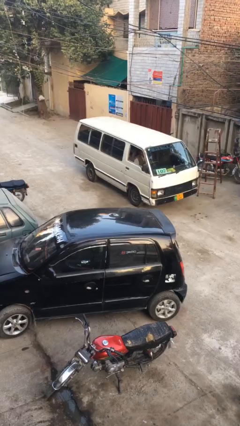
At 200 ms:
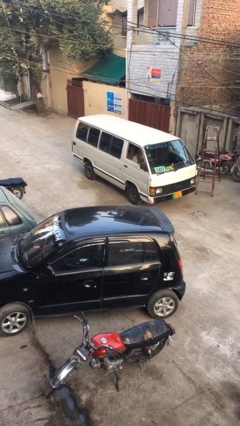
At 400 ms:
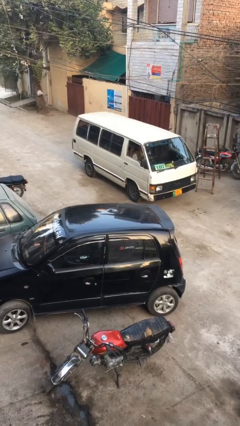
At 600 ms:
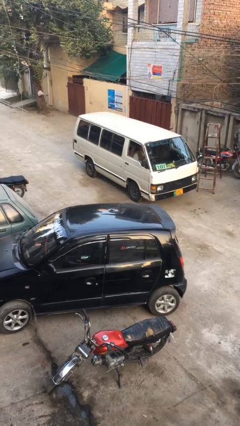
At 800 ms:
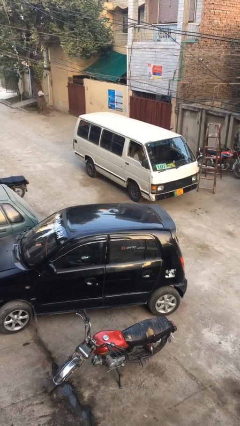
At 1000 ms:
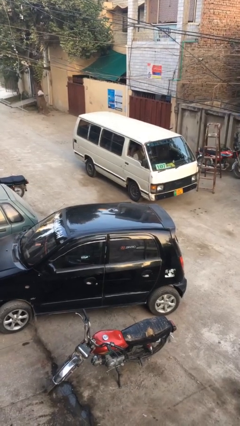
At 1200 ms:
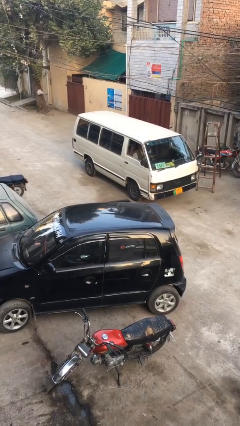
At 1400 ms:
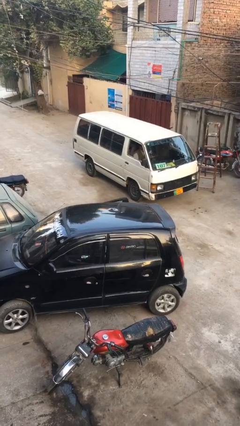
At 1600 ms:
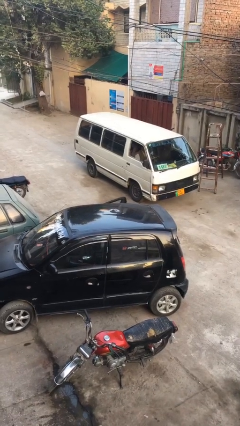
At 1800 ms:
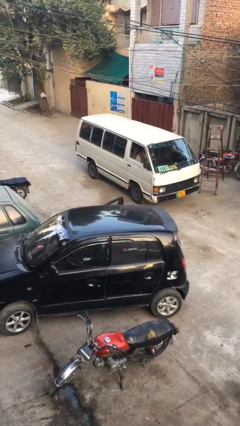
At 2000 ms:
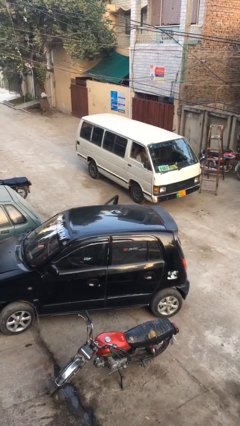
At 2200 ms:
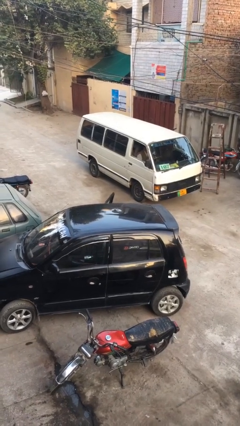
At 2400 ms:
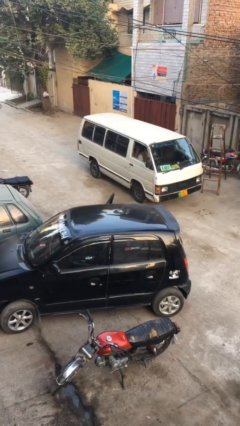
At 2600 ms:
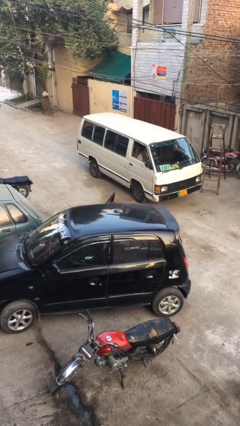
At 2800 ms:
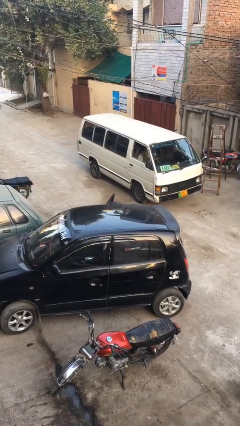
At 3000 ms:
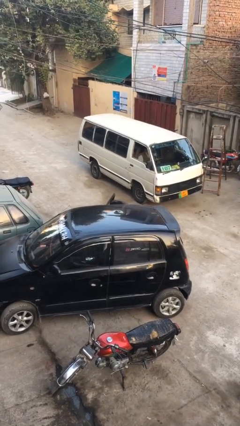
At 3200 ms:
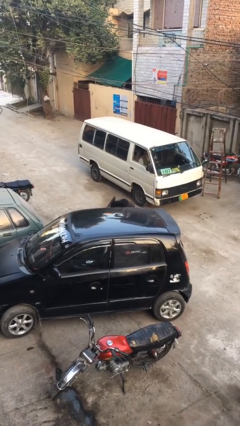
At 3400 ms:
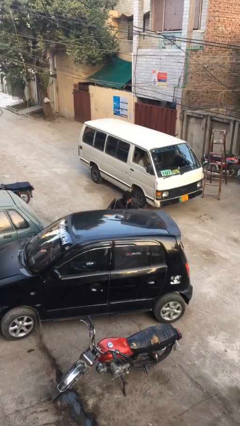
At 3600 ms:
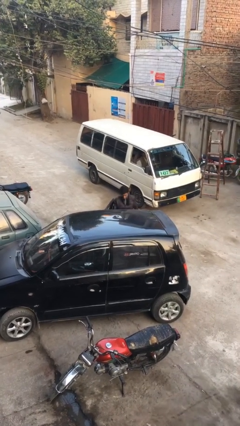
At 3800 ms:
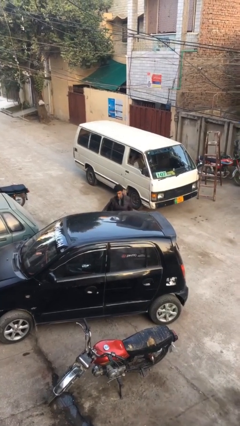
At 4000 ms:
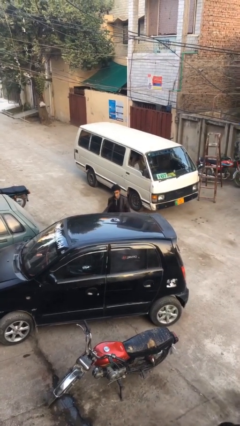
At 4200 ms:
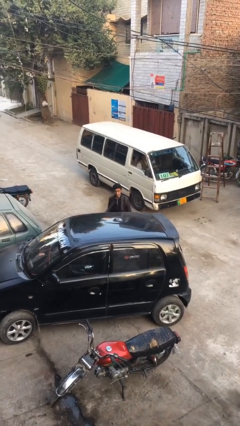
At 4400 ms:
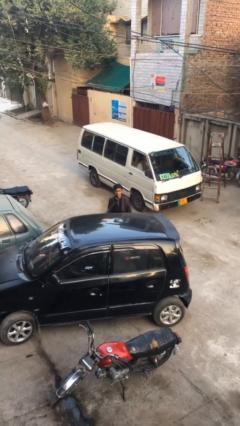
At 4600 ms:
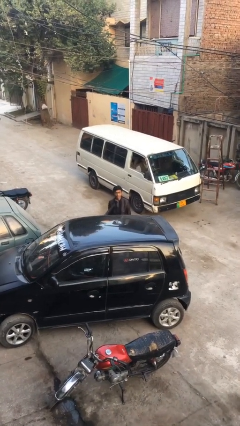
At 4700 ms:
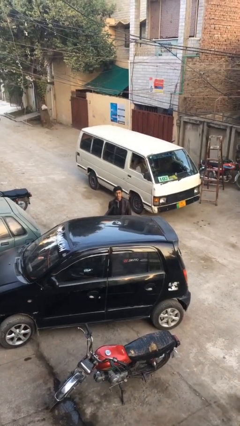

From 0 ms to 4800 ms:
person exits car

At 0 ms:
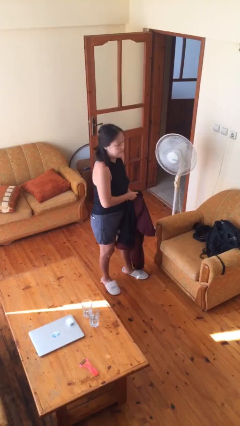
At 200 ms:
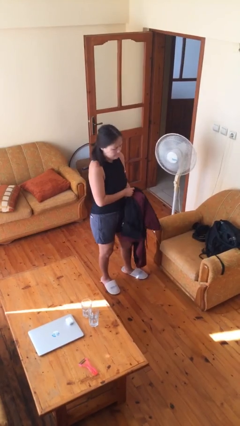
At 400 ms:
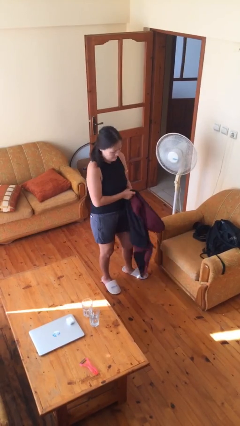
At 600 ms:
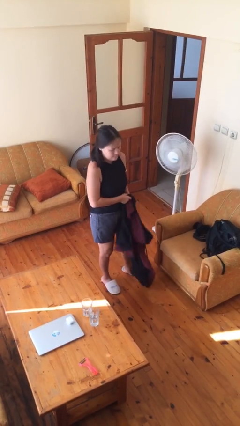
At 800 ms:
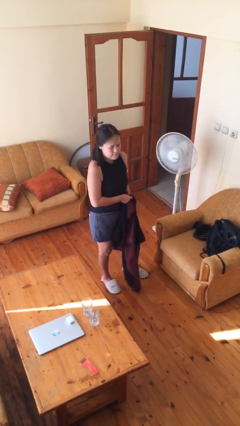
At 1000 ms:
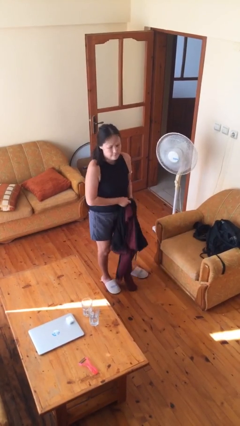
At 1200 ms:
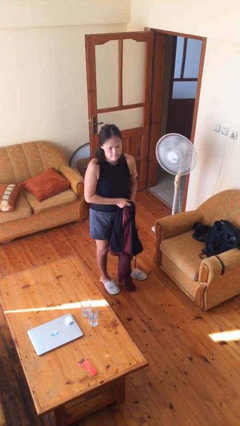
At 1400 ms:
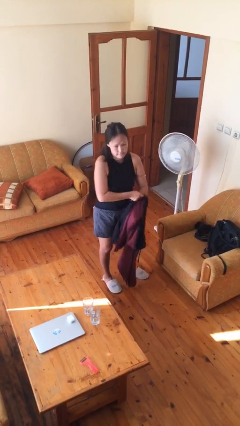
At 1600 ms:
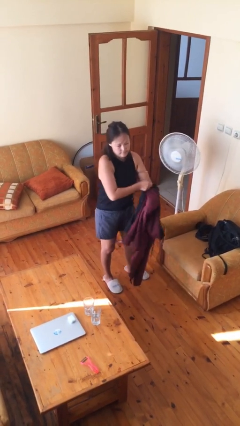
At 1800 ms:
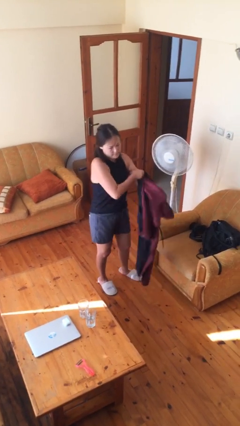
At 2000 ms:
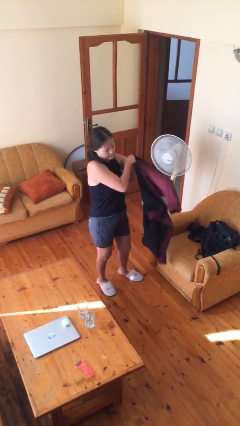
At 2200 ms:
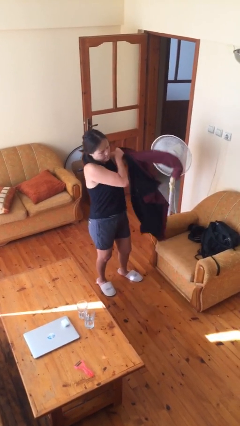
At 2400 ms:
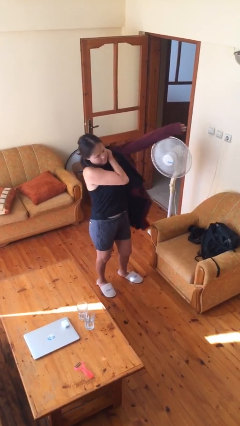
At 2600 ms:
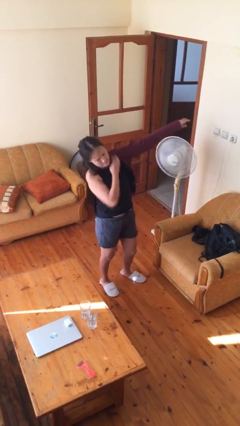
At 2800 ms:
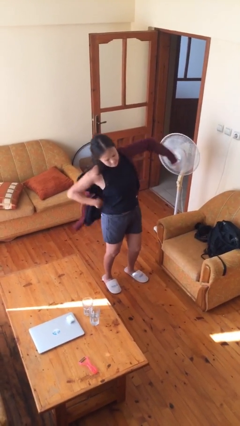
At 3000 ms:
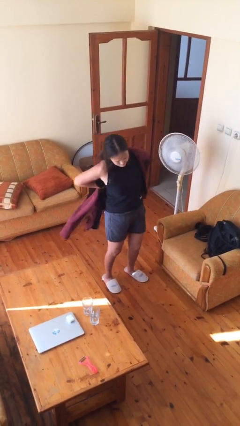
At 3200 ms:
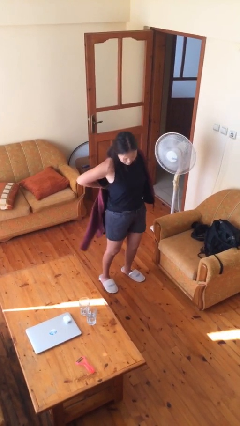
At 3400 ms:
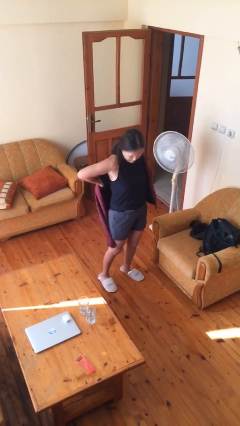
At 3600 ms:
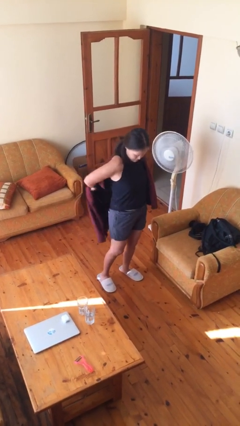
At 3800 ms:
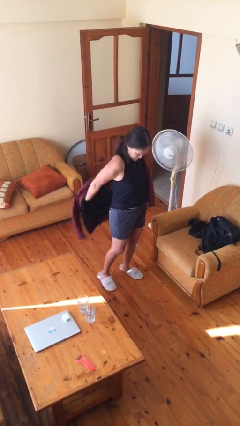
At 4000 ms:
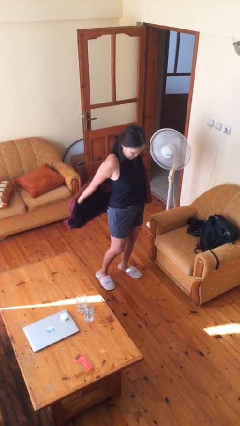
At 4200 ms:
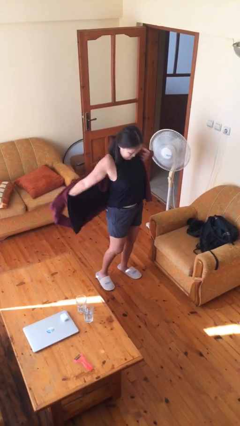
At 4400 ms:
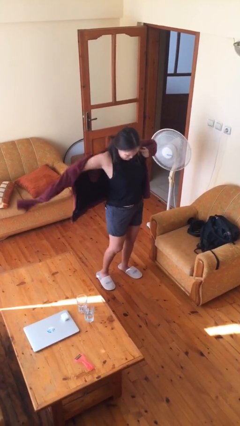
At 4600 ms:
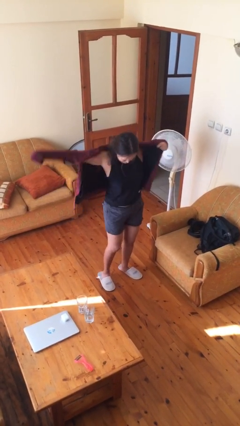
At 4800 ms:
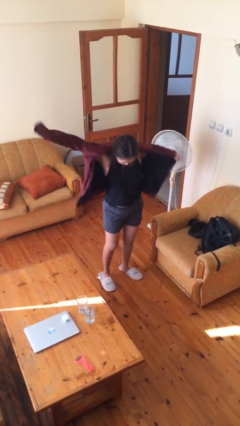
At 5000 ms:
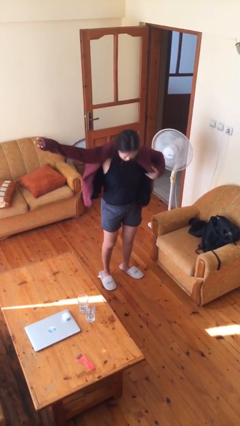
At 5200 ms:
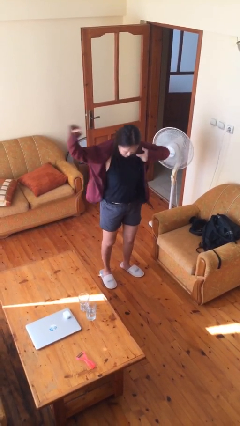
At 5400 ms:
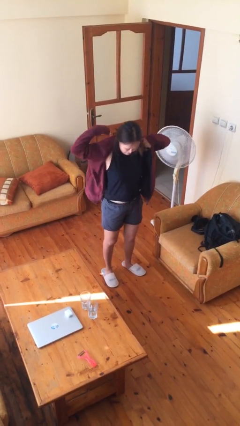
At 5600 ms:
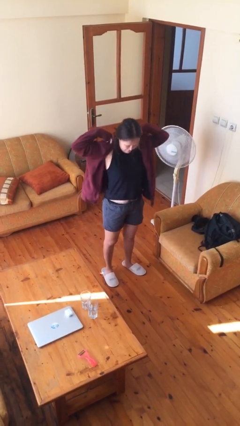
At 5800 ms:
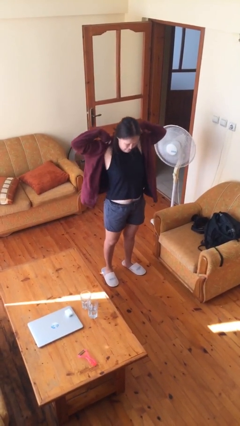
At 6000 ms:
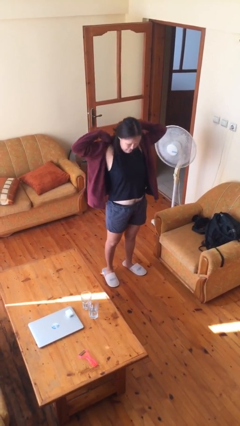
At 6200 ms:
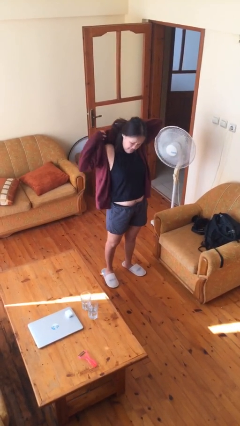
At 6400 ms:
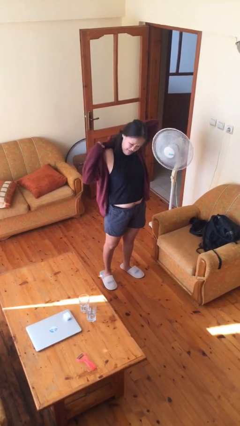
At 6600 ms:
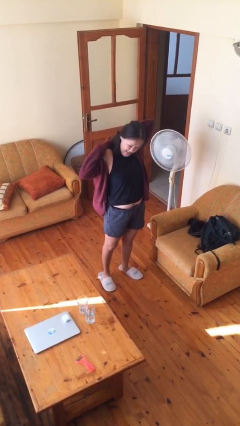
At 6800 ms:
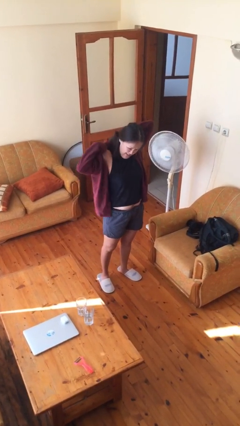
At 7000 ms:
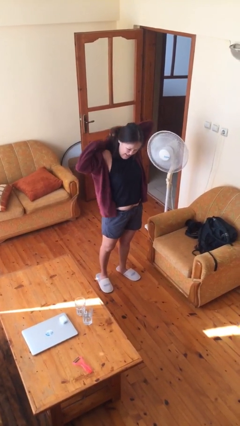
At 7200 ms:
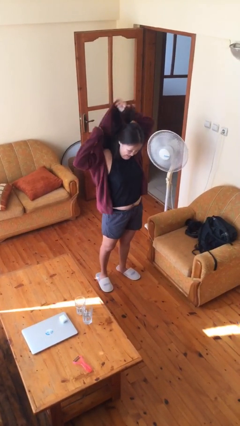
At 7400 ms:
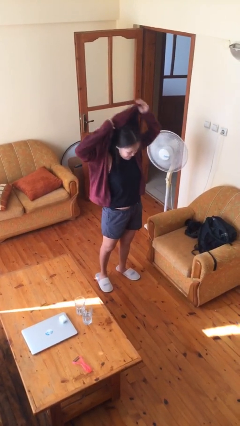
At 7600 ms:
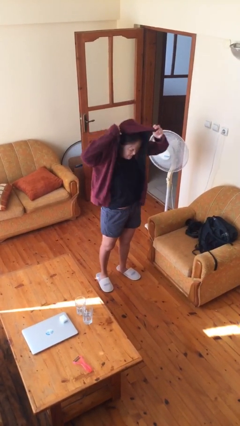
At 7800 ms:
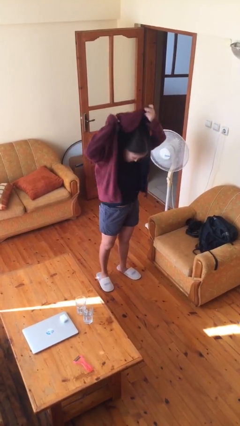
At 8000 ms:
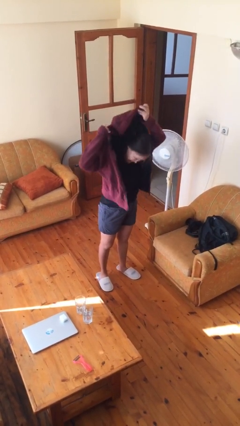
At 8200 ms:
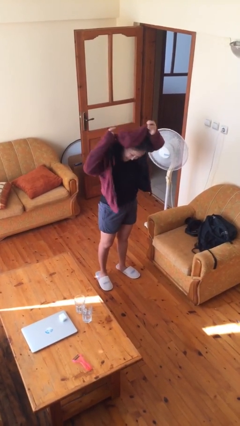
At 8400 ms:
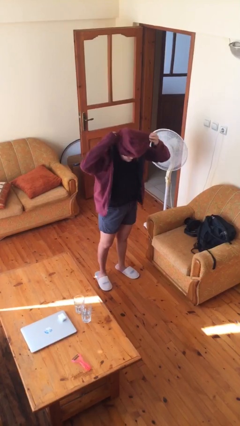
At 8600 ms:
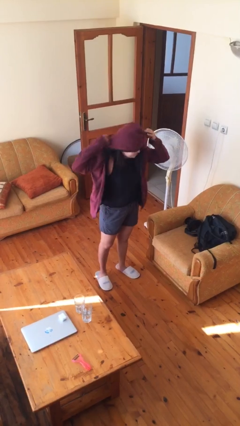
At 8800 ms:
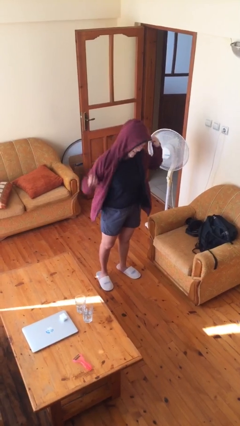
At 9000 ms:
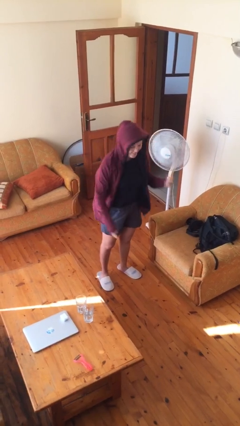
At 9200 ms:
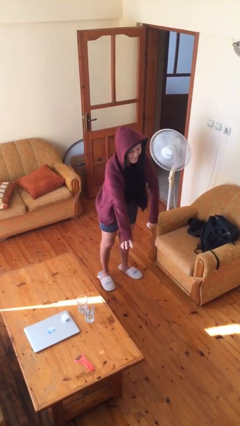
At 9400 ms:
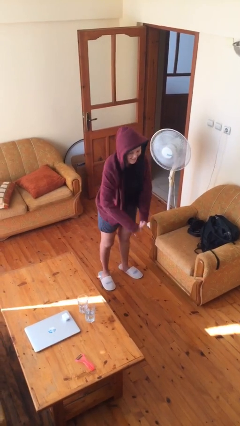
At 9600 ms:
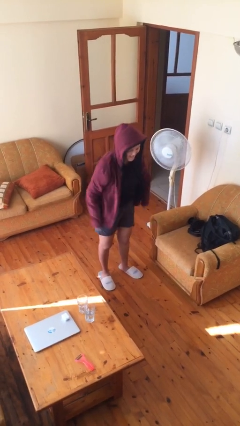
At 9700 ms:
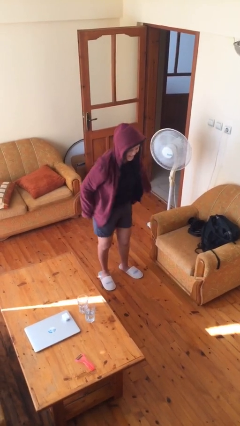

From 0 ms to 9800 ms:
person puts on hoodie

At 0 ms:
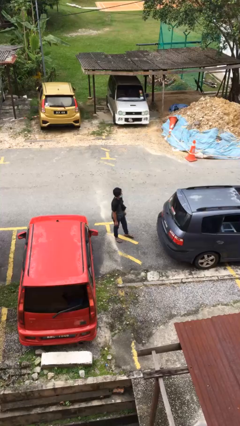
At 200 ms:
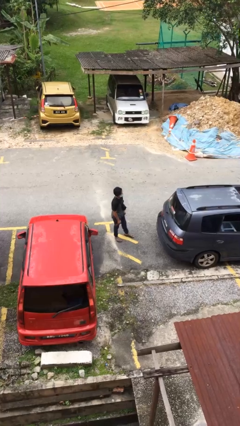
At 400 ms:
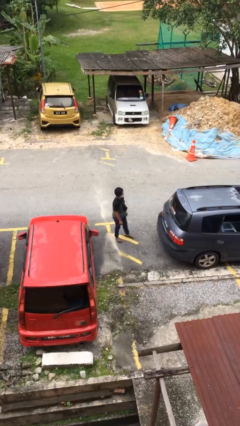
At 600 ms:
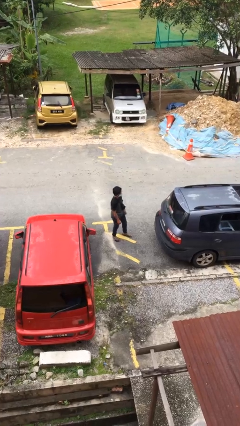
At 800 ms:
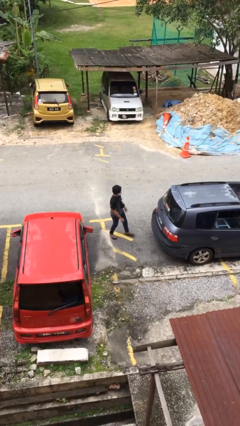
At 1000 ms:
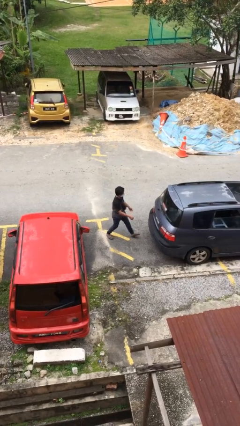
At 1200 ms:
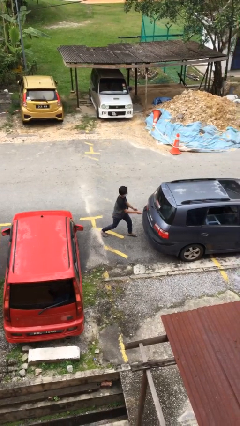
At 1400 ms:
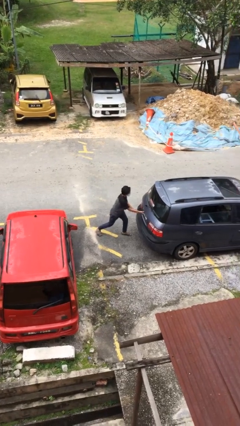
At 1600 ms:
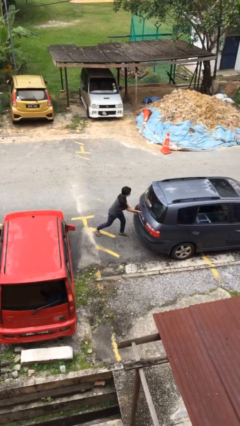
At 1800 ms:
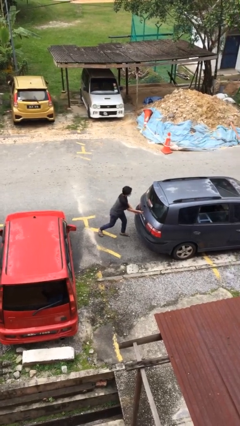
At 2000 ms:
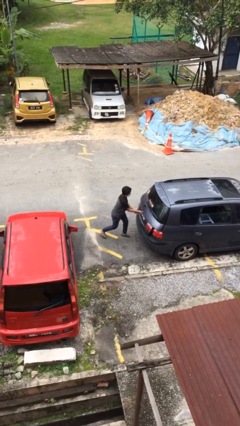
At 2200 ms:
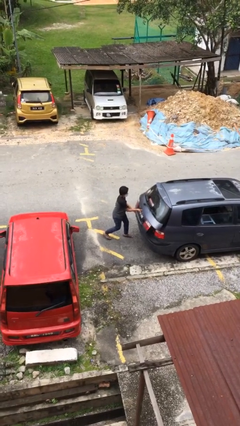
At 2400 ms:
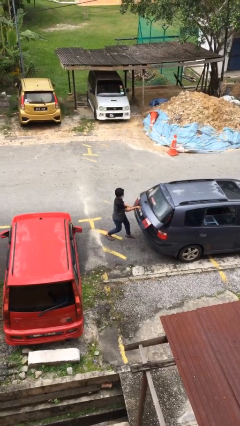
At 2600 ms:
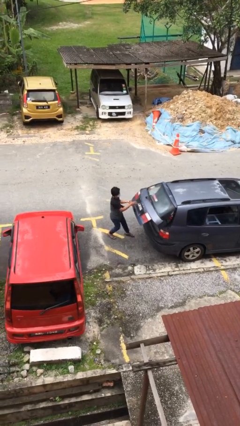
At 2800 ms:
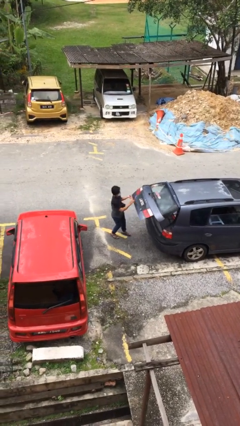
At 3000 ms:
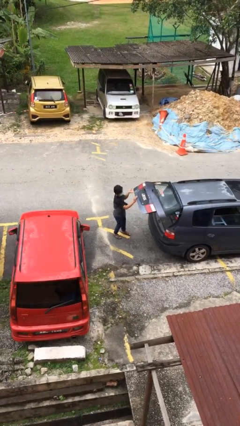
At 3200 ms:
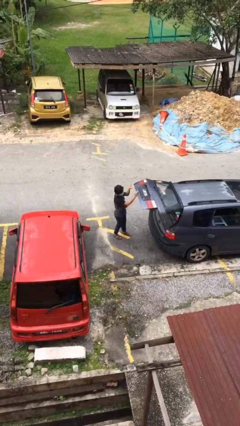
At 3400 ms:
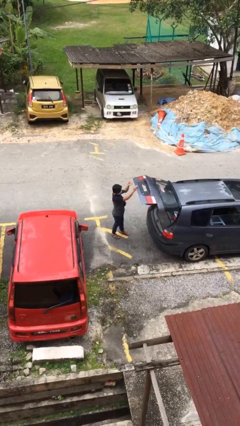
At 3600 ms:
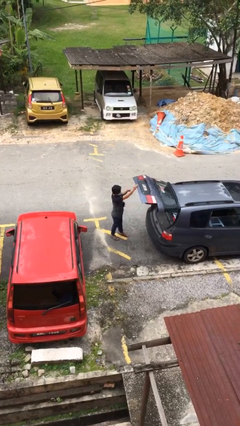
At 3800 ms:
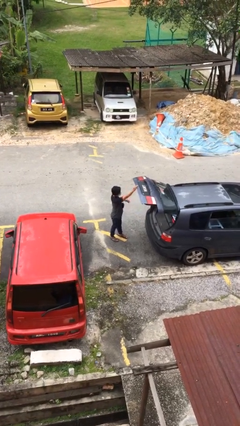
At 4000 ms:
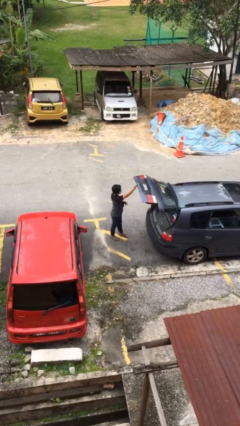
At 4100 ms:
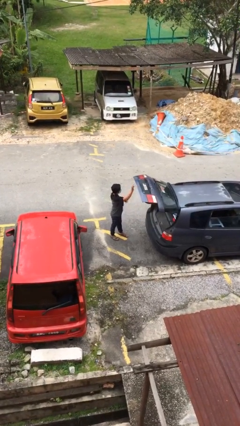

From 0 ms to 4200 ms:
person opens car trunk
